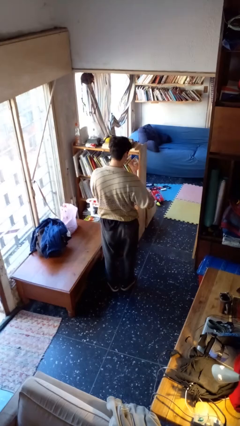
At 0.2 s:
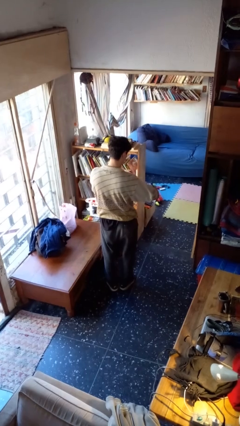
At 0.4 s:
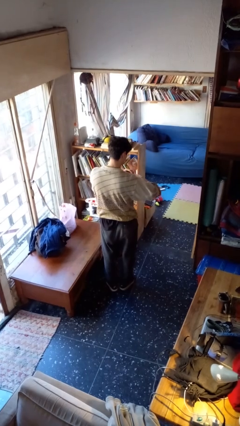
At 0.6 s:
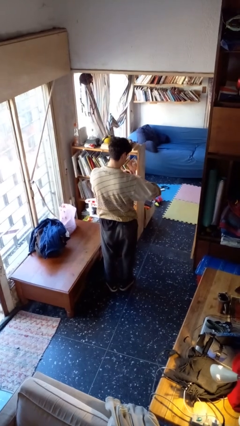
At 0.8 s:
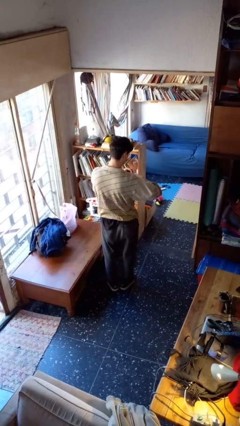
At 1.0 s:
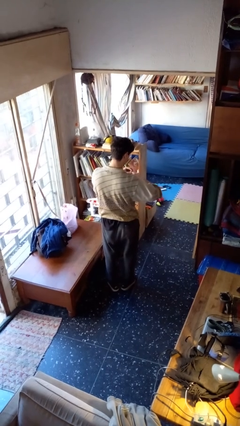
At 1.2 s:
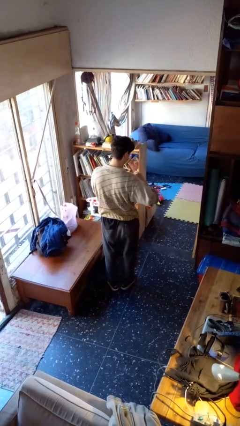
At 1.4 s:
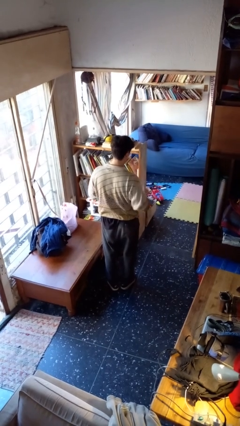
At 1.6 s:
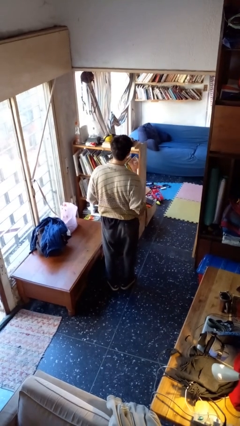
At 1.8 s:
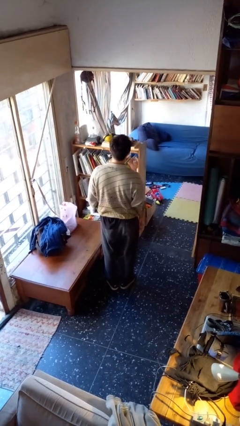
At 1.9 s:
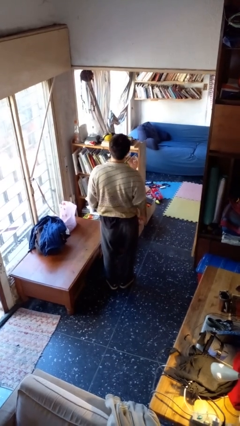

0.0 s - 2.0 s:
person takes off ring

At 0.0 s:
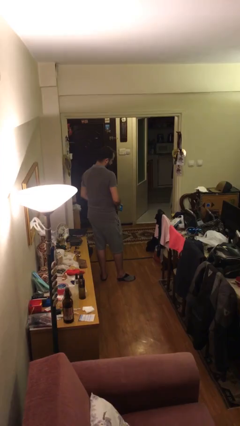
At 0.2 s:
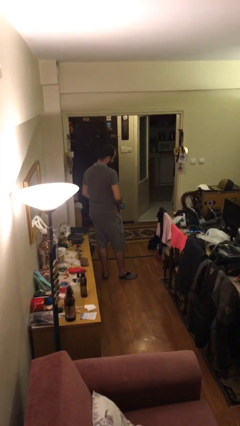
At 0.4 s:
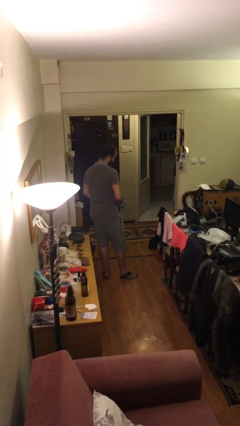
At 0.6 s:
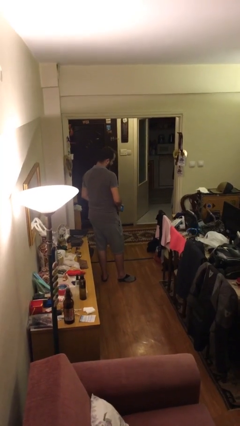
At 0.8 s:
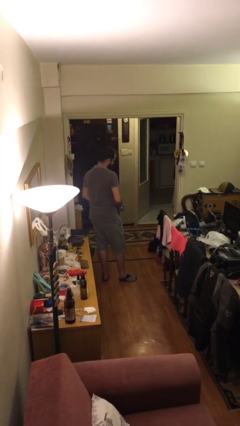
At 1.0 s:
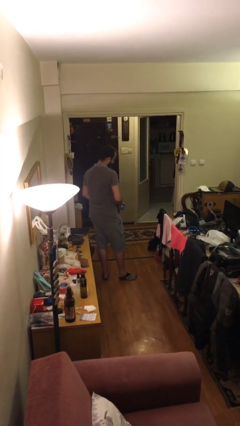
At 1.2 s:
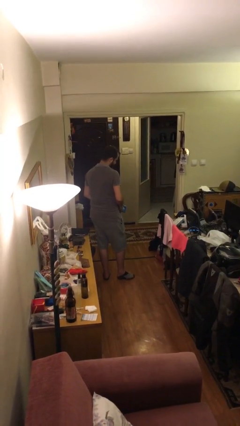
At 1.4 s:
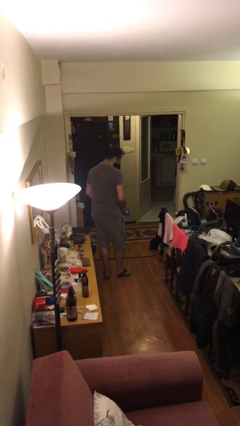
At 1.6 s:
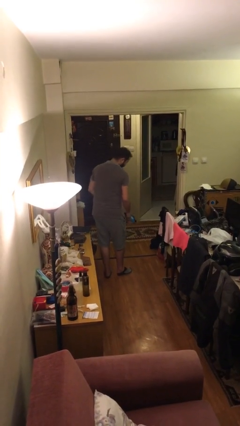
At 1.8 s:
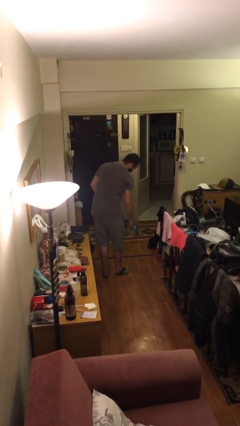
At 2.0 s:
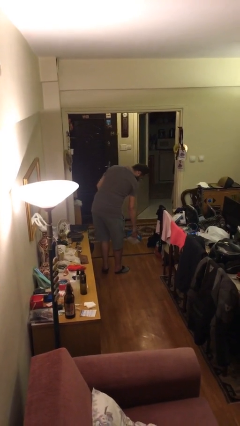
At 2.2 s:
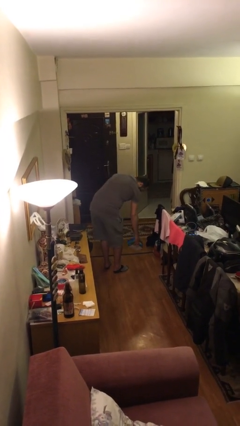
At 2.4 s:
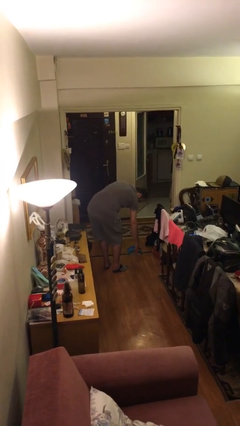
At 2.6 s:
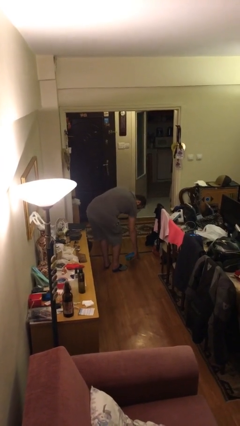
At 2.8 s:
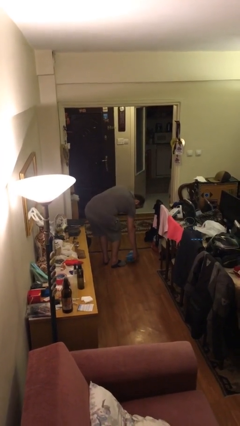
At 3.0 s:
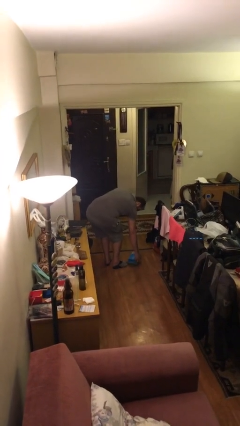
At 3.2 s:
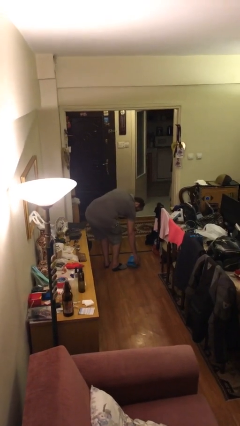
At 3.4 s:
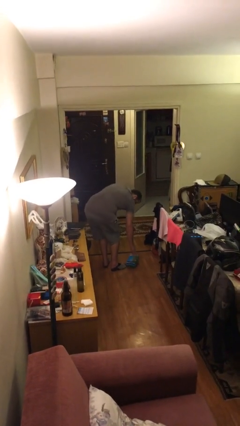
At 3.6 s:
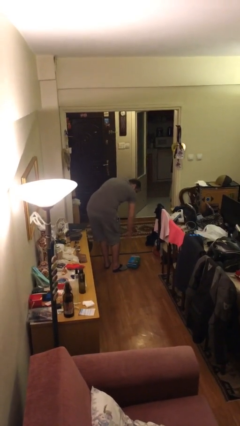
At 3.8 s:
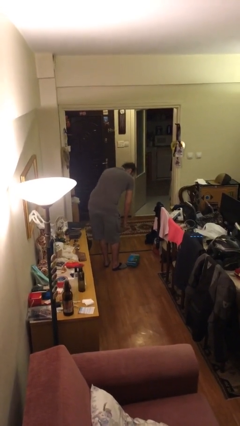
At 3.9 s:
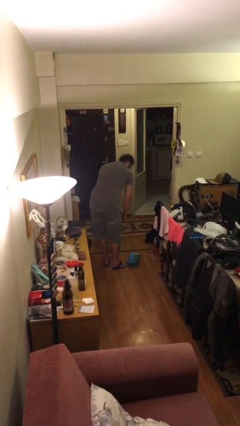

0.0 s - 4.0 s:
person puts down object on floor

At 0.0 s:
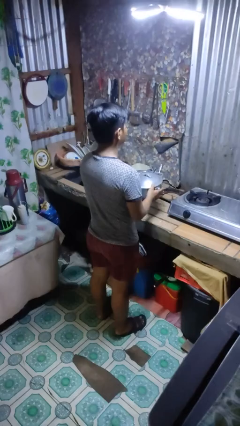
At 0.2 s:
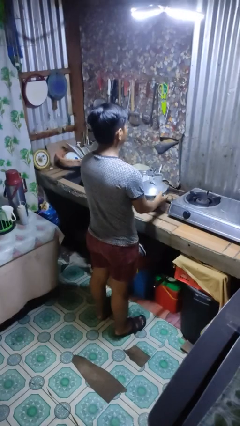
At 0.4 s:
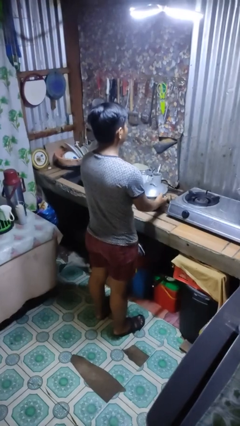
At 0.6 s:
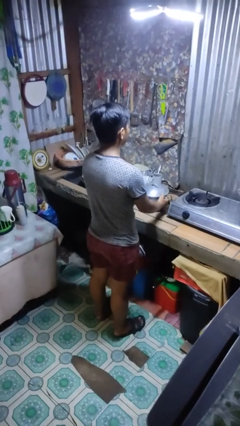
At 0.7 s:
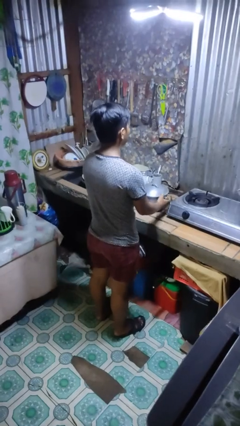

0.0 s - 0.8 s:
person puts down object on countertop

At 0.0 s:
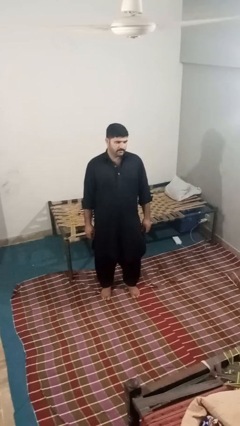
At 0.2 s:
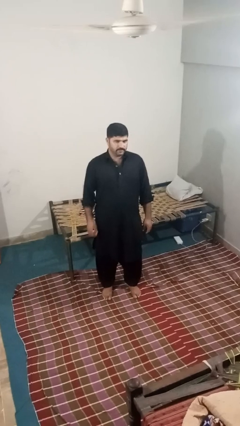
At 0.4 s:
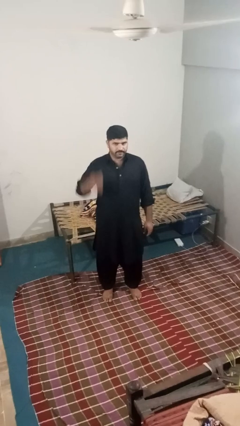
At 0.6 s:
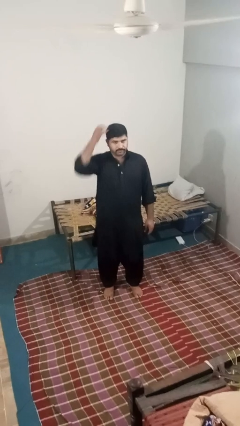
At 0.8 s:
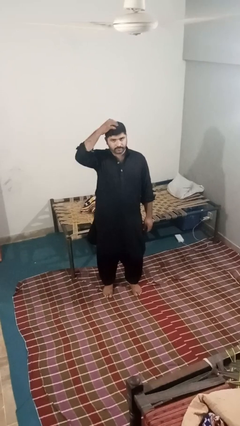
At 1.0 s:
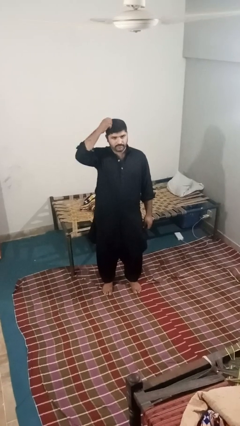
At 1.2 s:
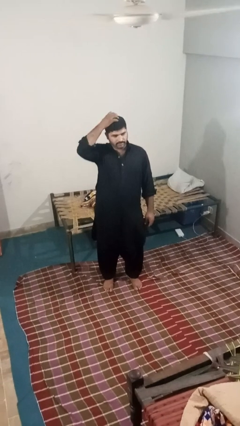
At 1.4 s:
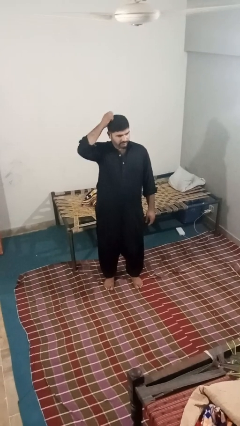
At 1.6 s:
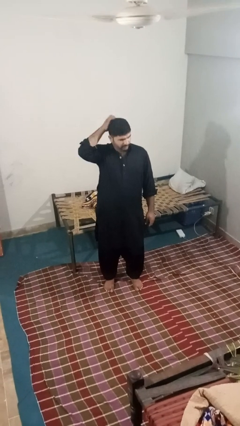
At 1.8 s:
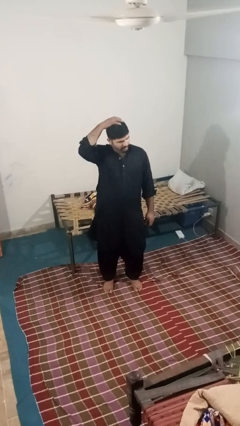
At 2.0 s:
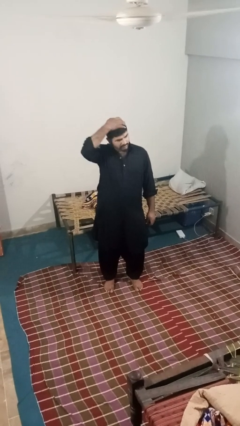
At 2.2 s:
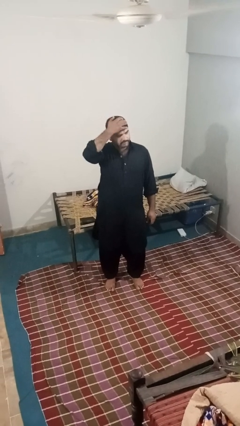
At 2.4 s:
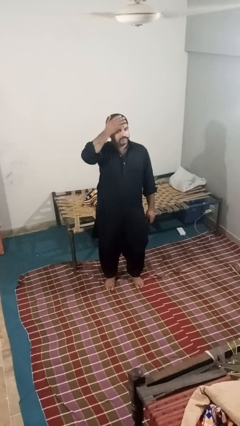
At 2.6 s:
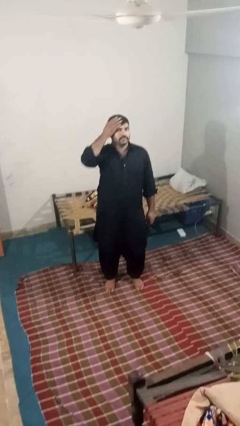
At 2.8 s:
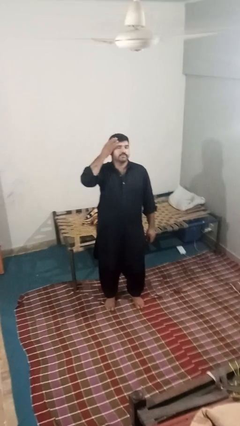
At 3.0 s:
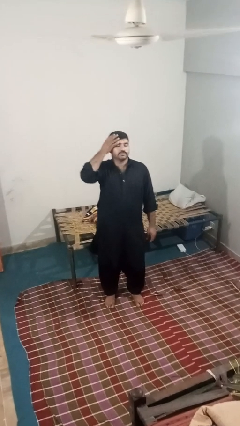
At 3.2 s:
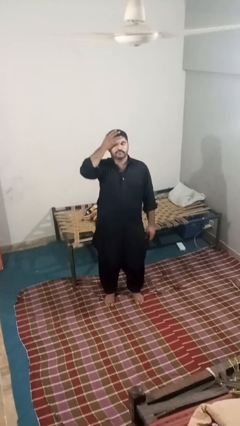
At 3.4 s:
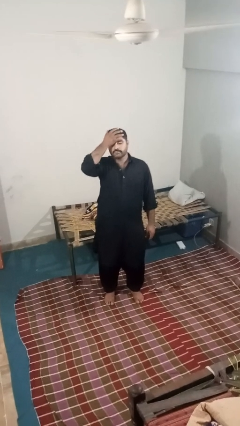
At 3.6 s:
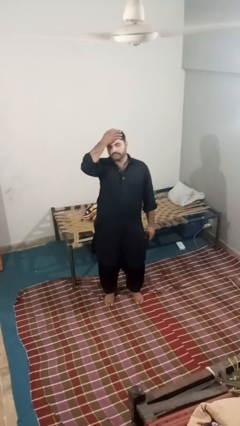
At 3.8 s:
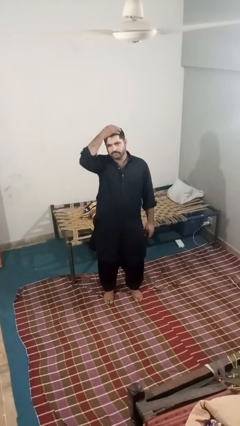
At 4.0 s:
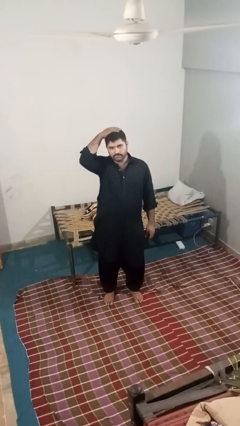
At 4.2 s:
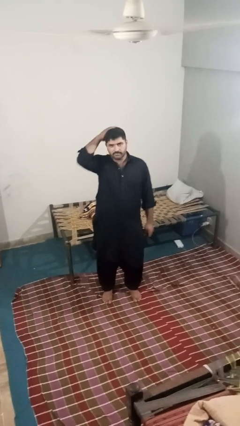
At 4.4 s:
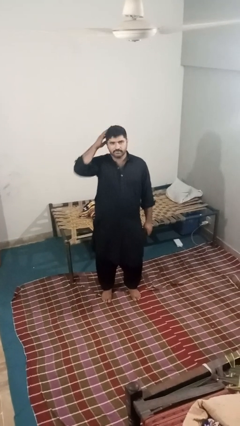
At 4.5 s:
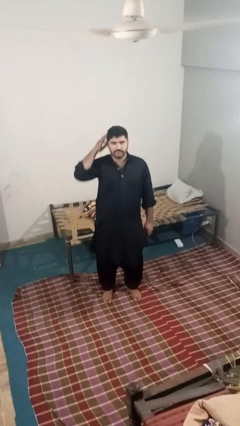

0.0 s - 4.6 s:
person scratches face

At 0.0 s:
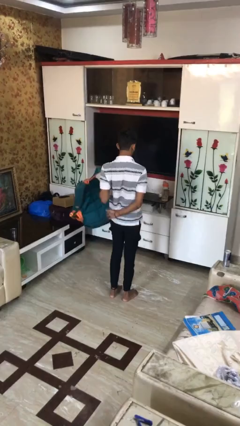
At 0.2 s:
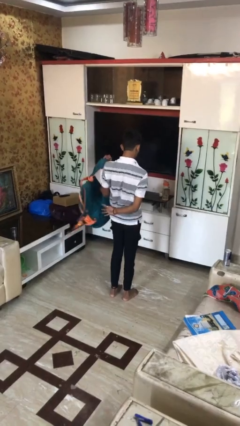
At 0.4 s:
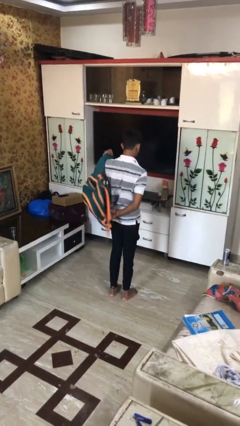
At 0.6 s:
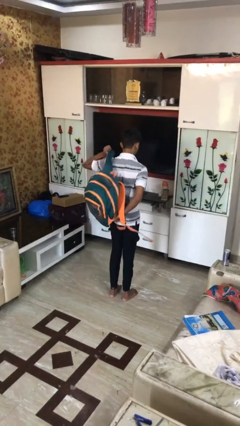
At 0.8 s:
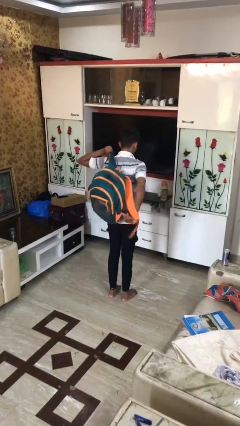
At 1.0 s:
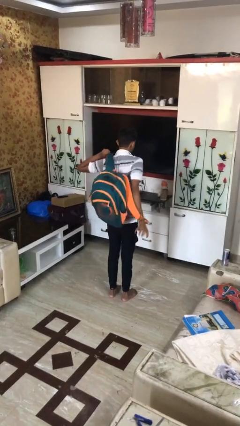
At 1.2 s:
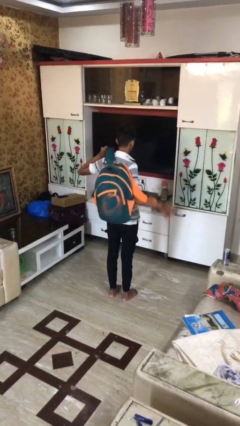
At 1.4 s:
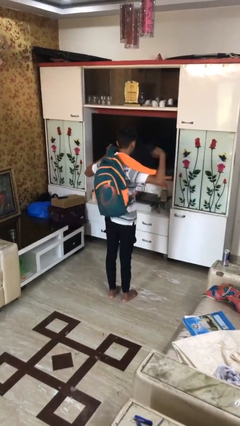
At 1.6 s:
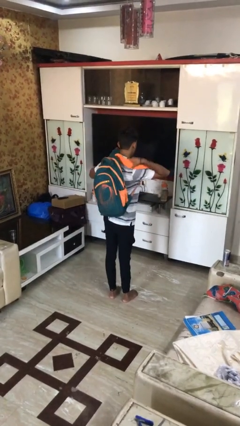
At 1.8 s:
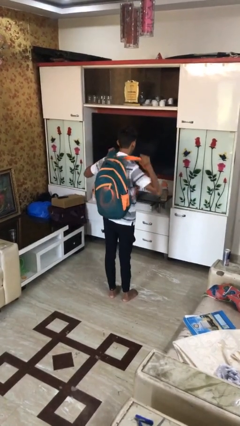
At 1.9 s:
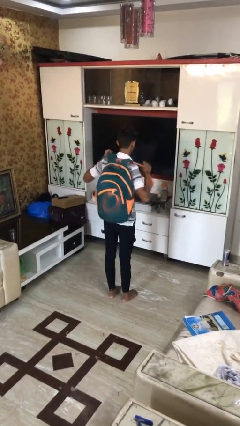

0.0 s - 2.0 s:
person puts on backpack

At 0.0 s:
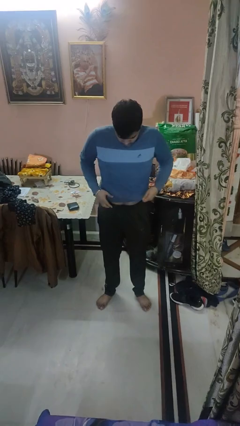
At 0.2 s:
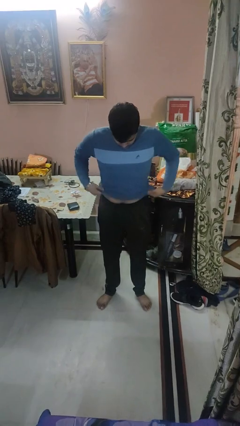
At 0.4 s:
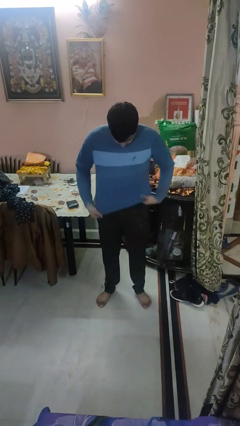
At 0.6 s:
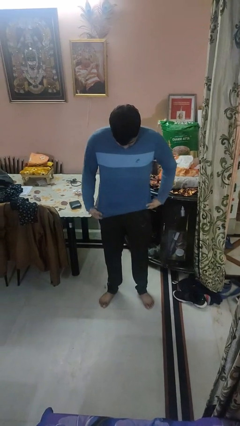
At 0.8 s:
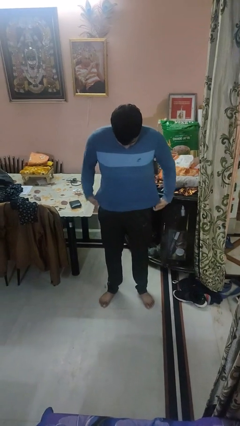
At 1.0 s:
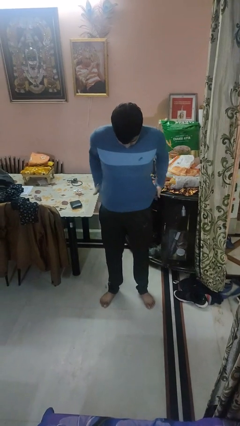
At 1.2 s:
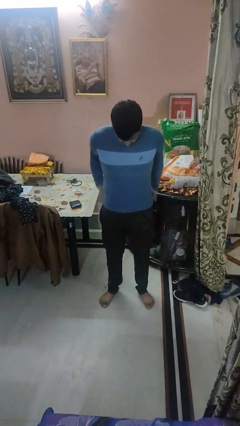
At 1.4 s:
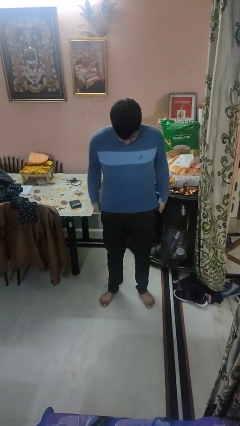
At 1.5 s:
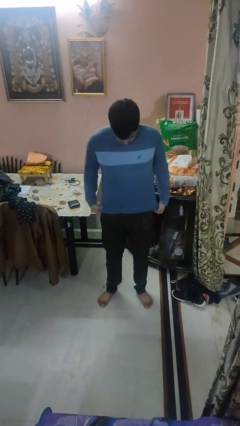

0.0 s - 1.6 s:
person untucks shirt

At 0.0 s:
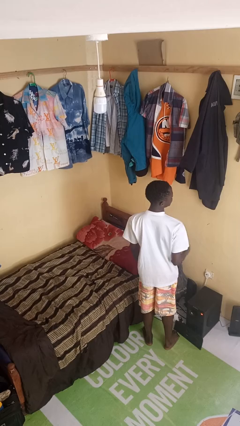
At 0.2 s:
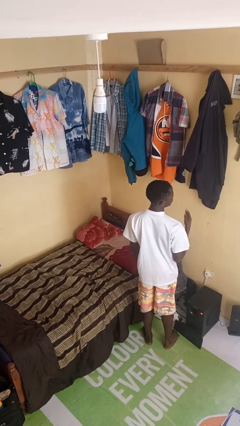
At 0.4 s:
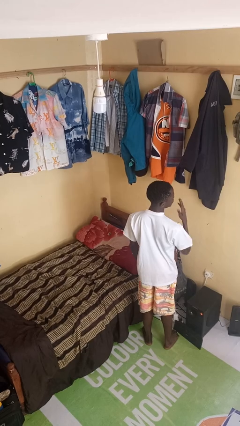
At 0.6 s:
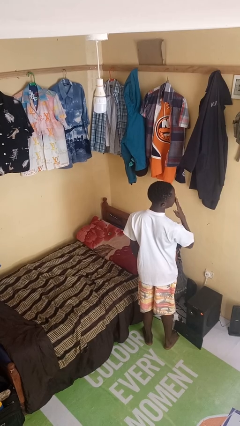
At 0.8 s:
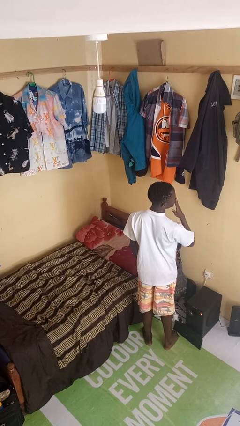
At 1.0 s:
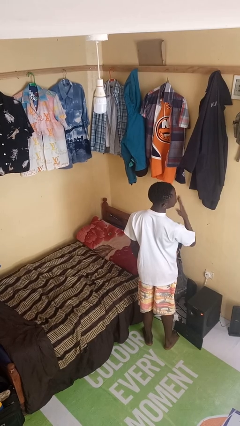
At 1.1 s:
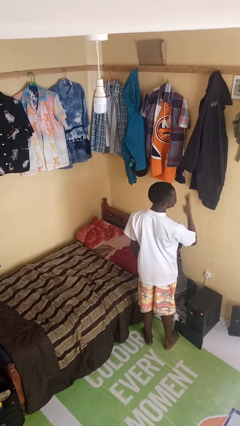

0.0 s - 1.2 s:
person gestures blow kiss

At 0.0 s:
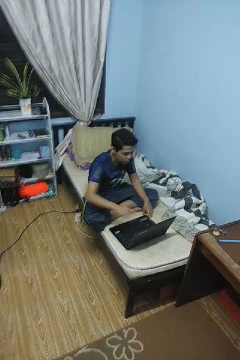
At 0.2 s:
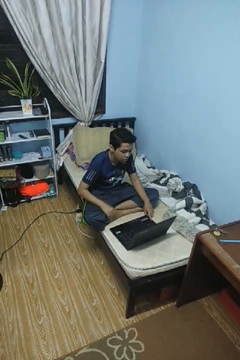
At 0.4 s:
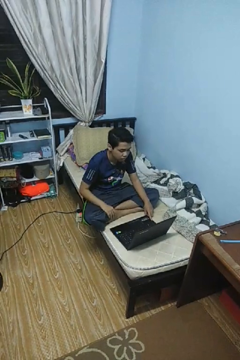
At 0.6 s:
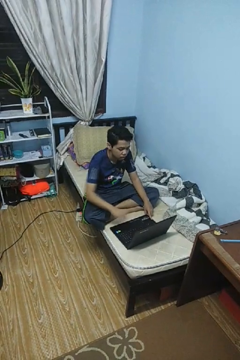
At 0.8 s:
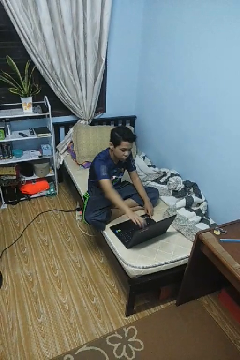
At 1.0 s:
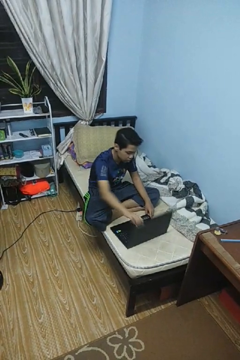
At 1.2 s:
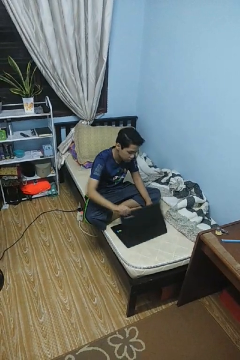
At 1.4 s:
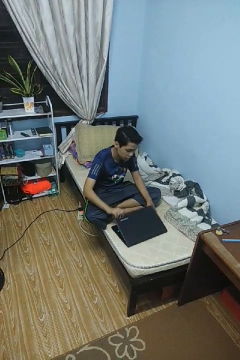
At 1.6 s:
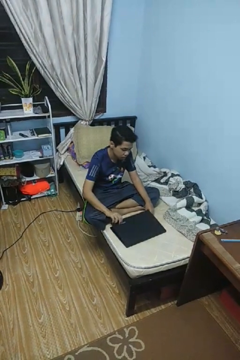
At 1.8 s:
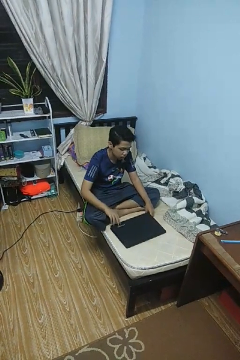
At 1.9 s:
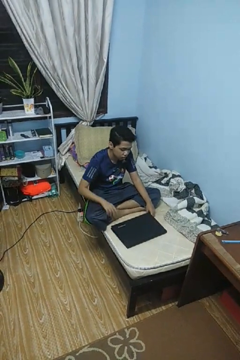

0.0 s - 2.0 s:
person closes laptop
